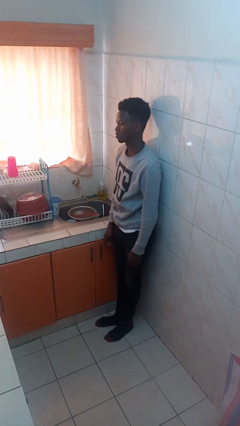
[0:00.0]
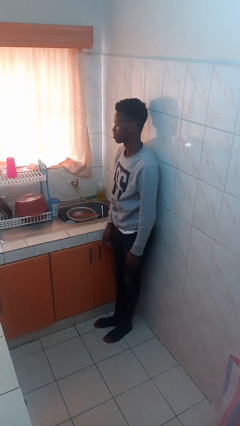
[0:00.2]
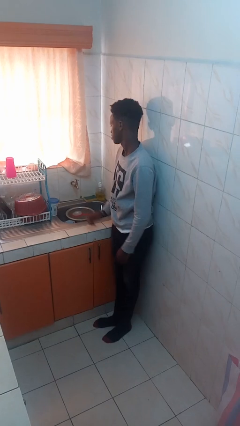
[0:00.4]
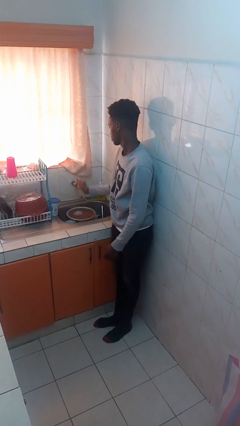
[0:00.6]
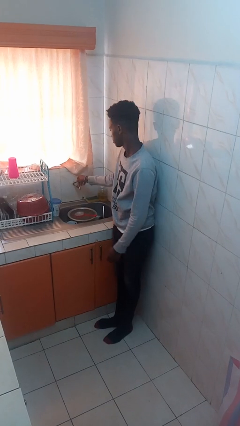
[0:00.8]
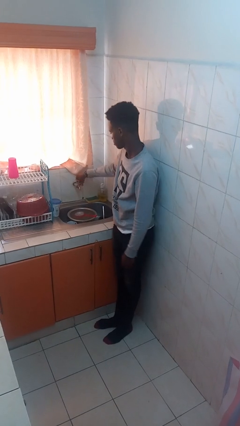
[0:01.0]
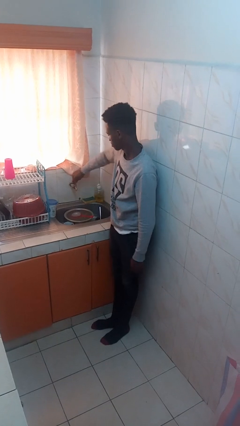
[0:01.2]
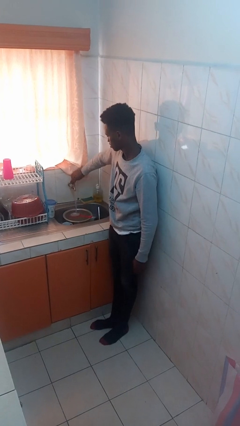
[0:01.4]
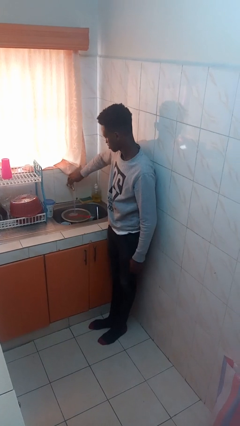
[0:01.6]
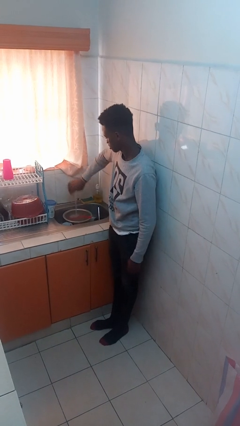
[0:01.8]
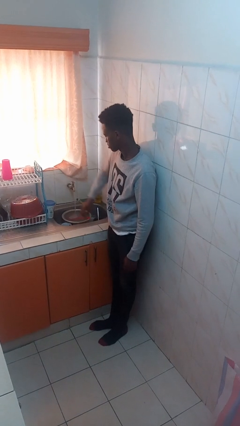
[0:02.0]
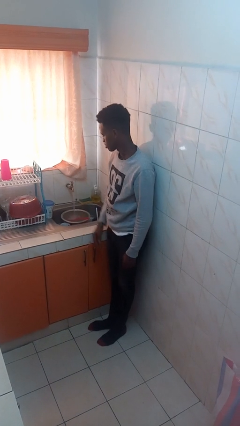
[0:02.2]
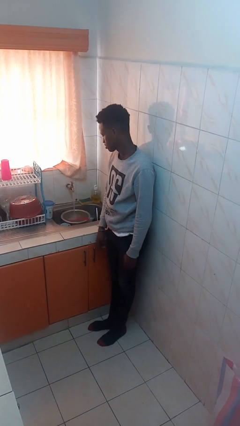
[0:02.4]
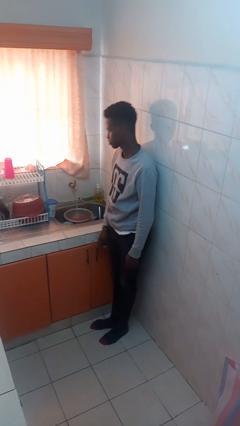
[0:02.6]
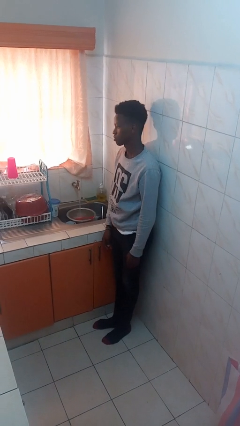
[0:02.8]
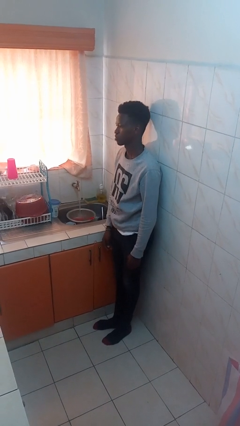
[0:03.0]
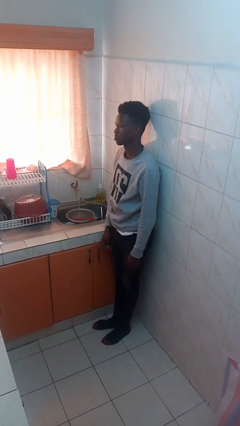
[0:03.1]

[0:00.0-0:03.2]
person turns on faucet

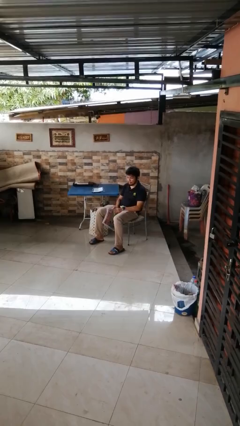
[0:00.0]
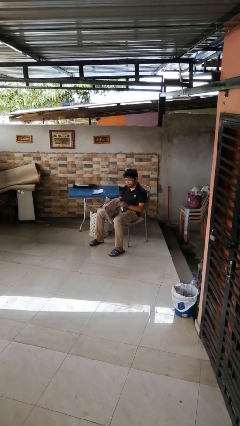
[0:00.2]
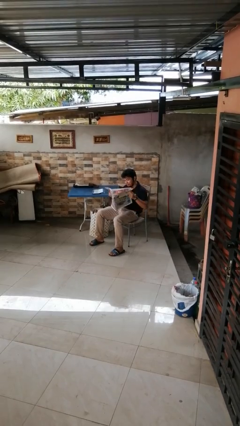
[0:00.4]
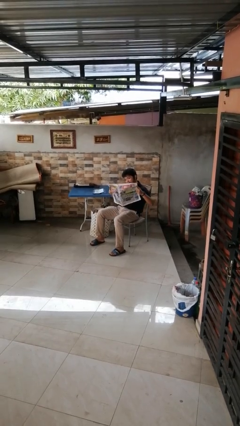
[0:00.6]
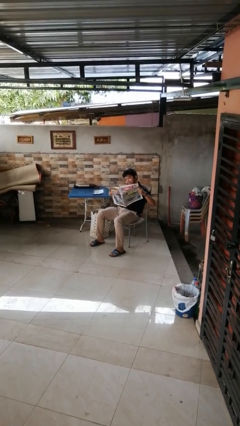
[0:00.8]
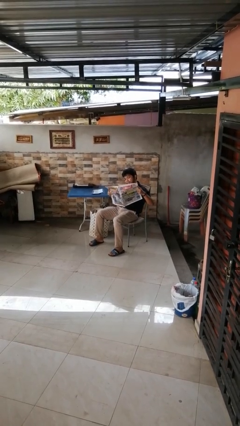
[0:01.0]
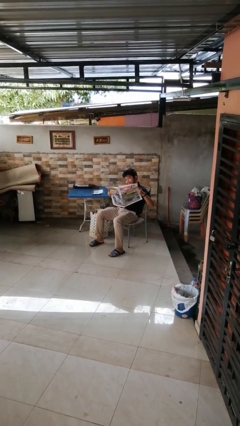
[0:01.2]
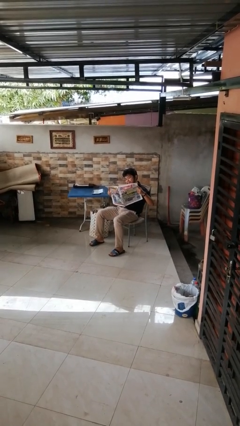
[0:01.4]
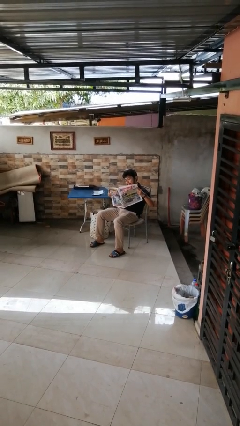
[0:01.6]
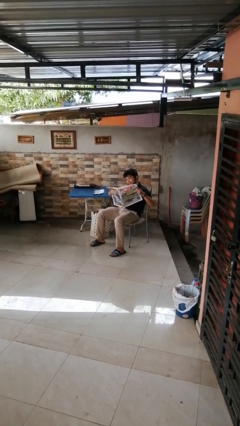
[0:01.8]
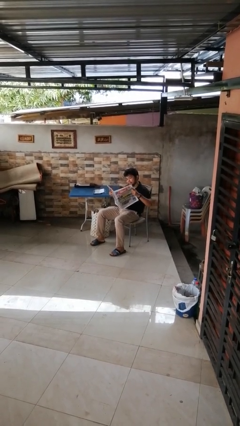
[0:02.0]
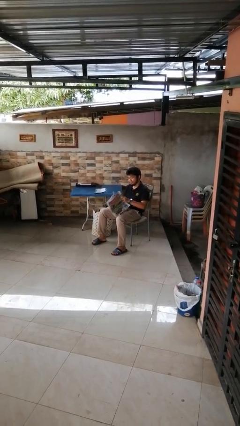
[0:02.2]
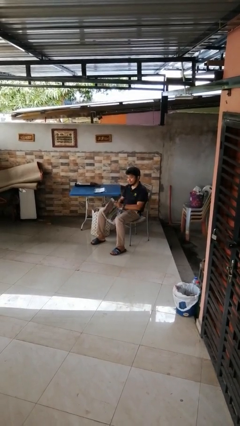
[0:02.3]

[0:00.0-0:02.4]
person reads newspaper

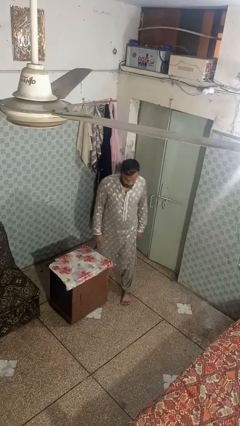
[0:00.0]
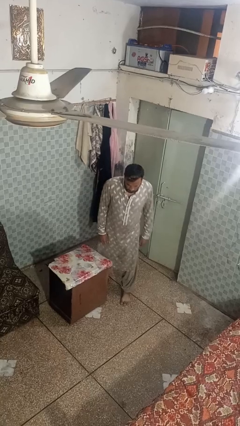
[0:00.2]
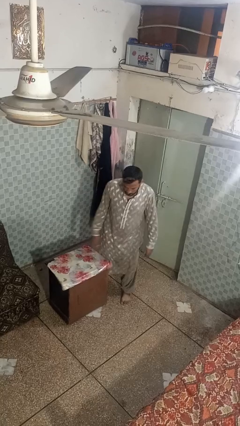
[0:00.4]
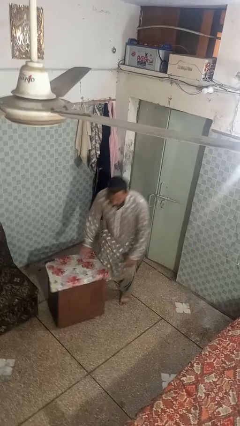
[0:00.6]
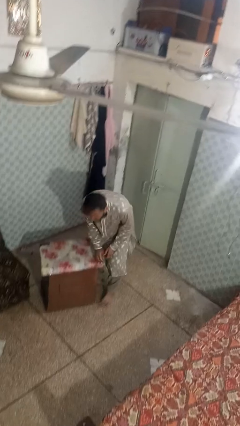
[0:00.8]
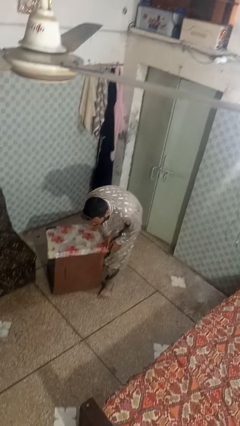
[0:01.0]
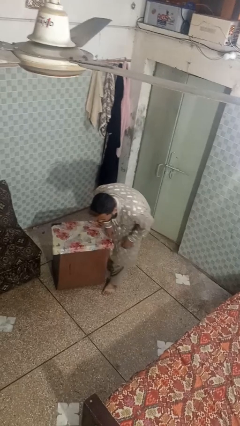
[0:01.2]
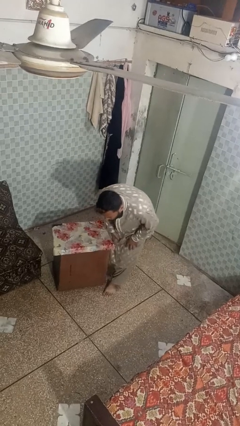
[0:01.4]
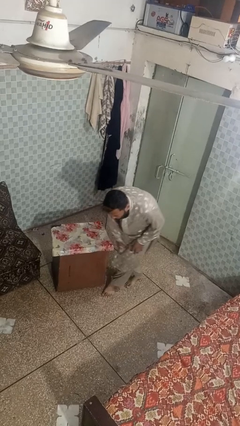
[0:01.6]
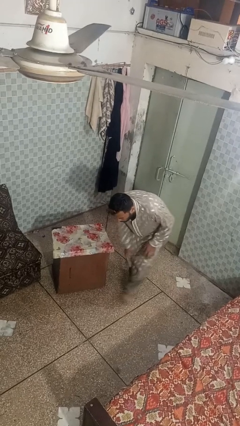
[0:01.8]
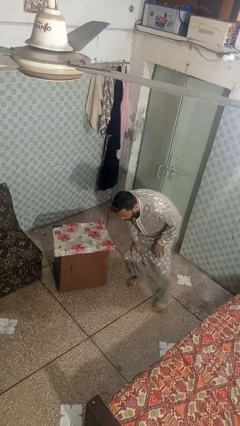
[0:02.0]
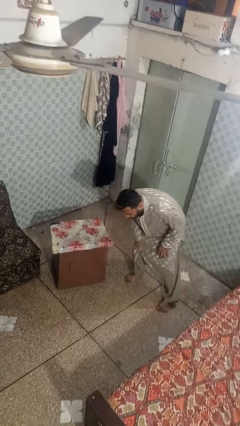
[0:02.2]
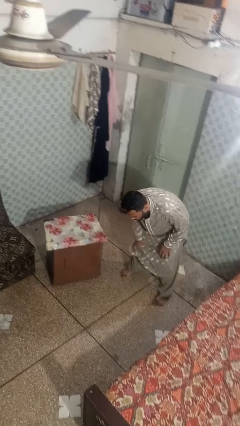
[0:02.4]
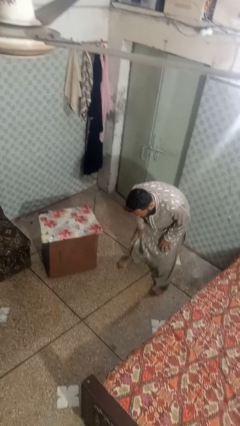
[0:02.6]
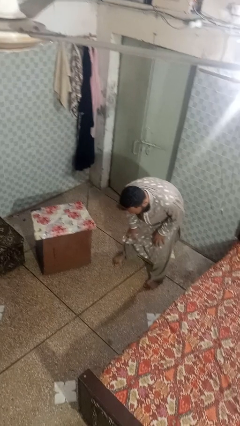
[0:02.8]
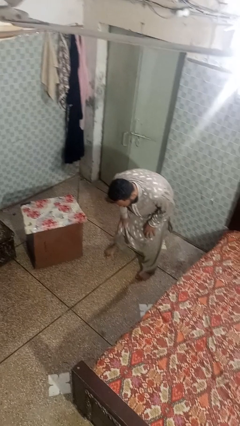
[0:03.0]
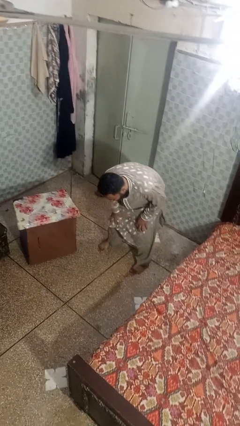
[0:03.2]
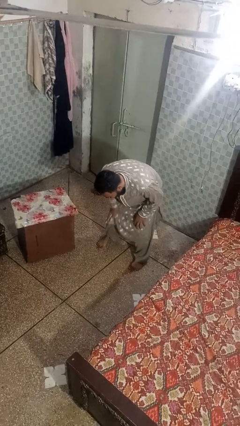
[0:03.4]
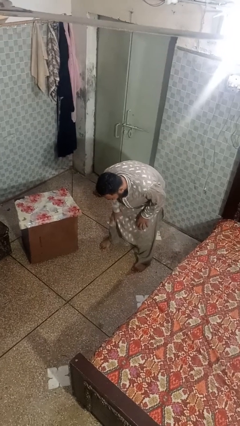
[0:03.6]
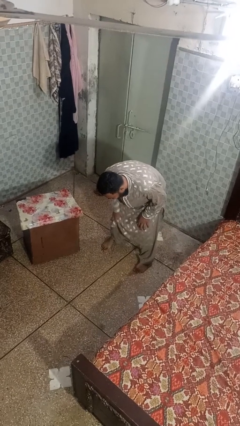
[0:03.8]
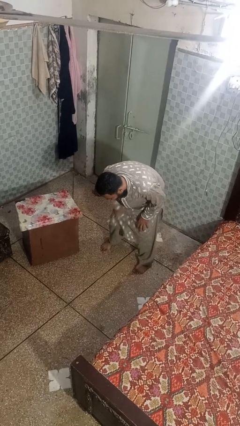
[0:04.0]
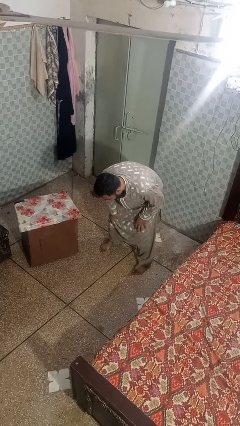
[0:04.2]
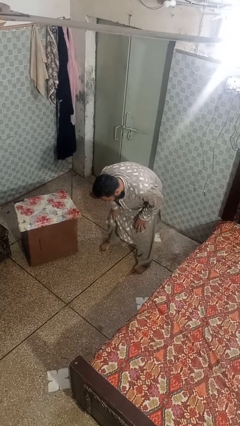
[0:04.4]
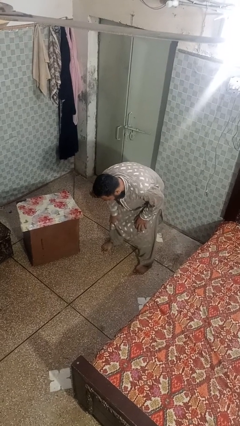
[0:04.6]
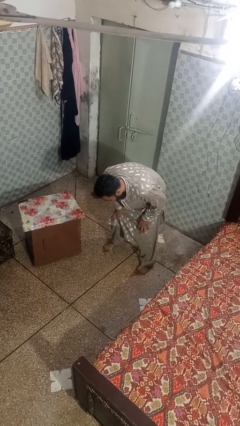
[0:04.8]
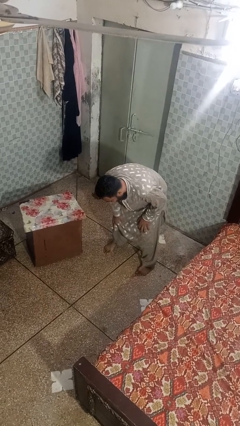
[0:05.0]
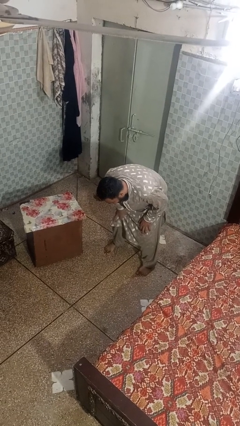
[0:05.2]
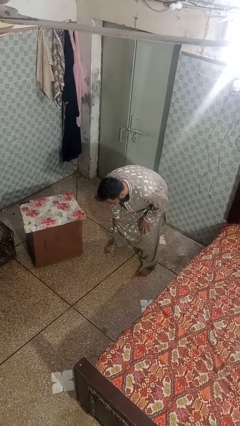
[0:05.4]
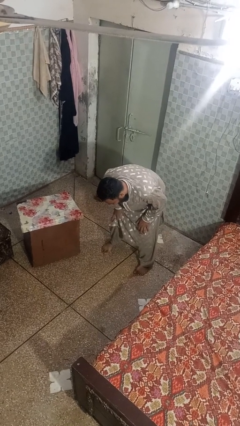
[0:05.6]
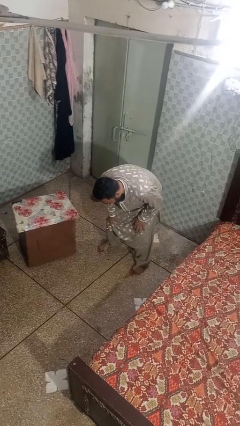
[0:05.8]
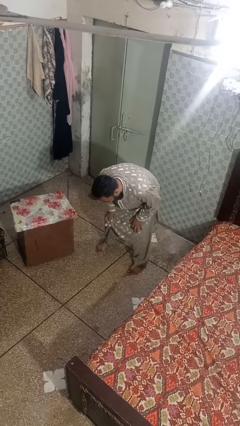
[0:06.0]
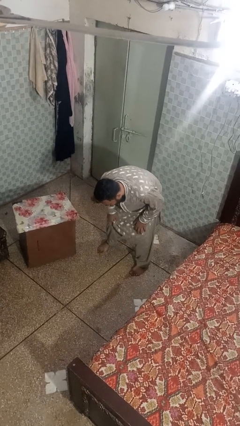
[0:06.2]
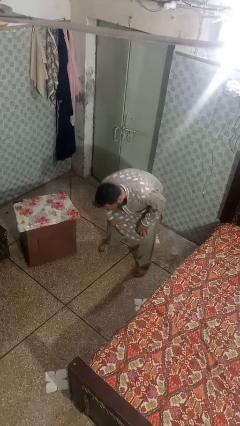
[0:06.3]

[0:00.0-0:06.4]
person trips on object on floor

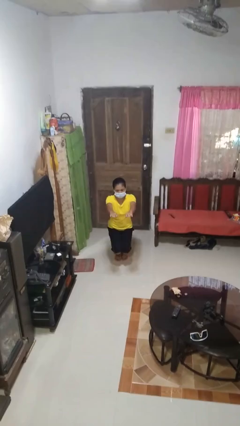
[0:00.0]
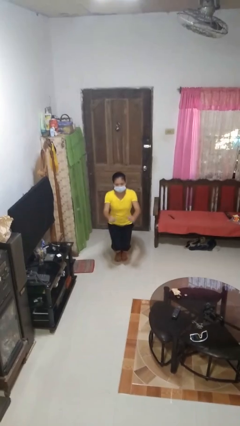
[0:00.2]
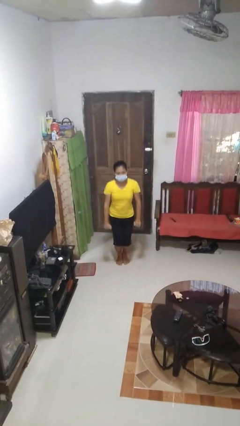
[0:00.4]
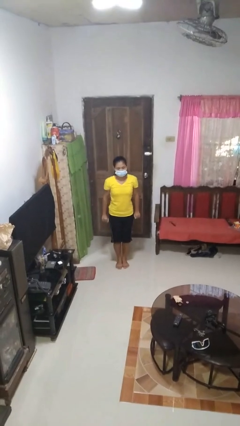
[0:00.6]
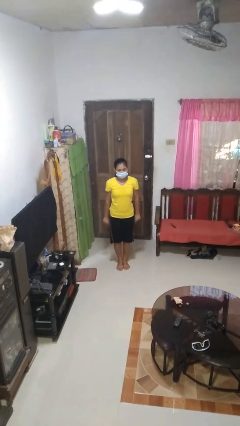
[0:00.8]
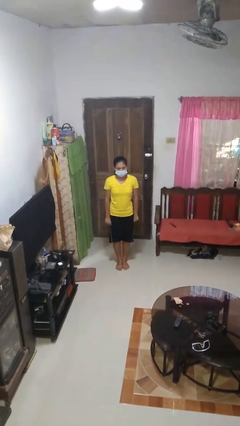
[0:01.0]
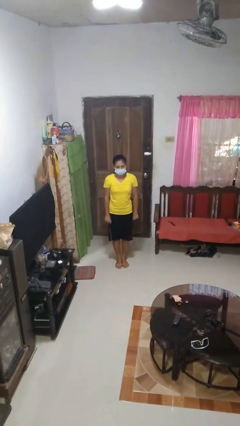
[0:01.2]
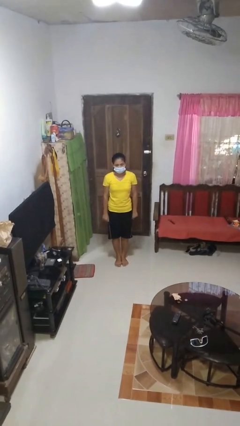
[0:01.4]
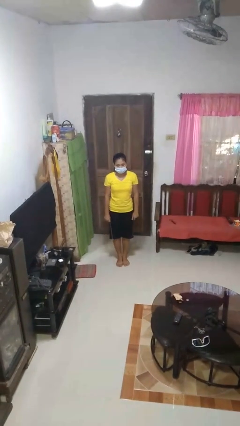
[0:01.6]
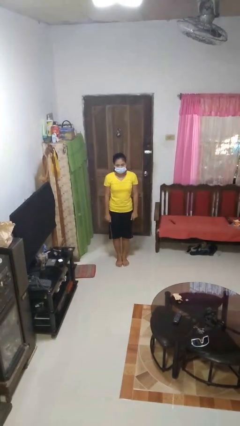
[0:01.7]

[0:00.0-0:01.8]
person stands up

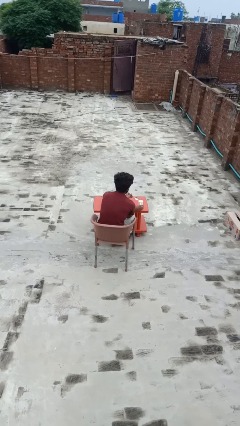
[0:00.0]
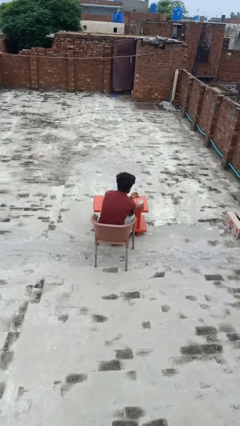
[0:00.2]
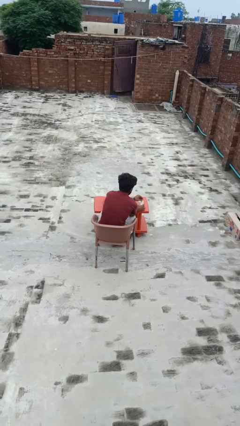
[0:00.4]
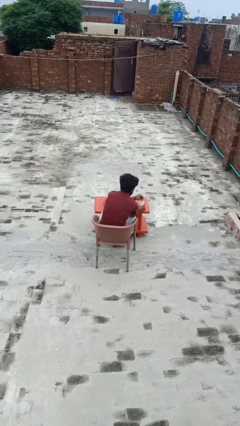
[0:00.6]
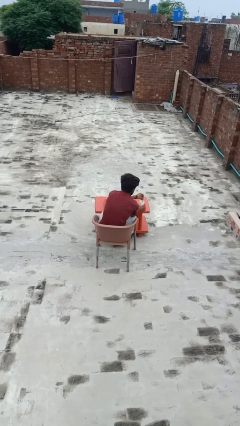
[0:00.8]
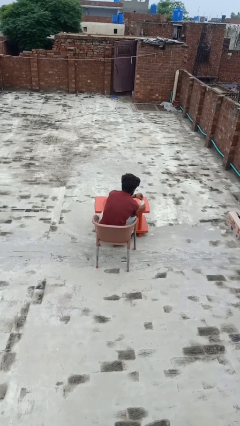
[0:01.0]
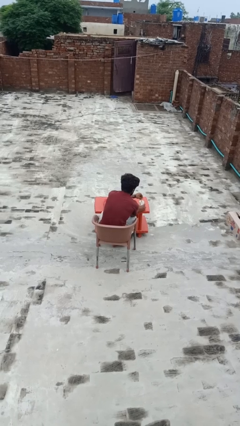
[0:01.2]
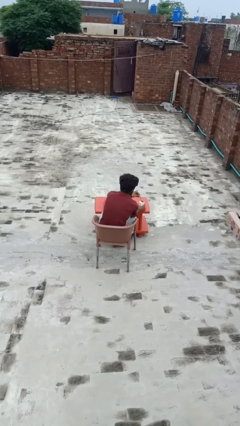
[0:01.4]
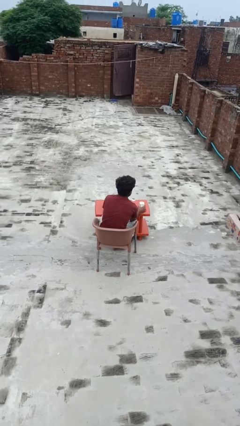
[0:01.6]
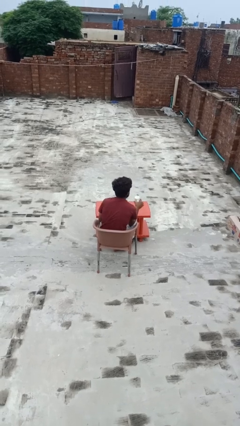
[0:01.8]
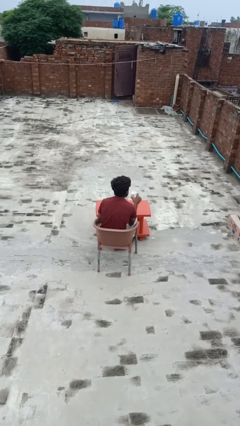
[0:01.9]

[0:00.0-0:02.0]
person stirs mug

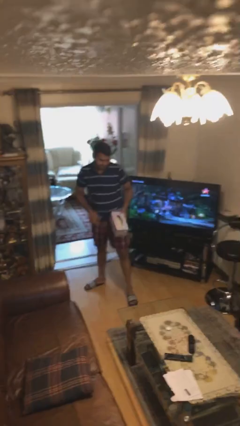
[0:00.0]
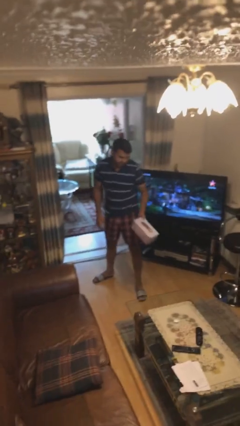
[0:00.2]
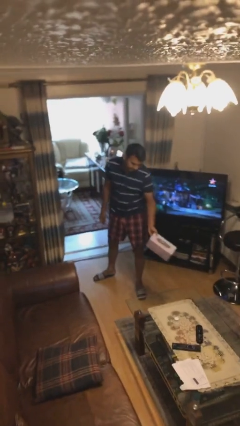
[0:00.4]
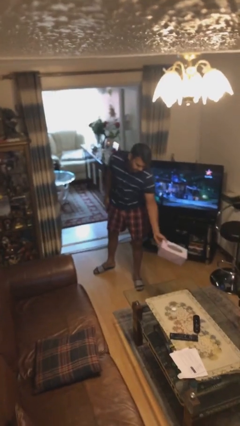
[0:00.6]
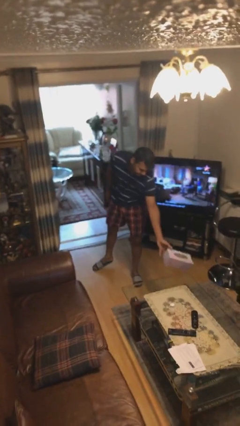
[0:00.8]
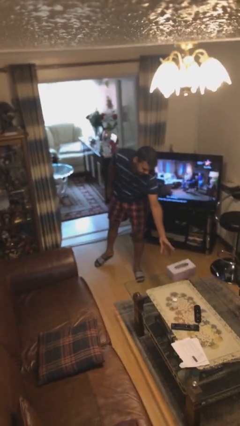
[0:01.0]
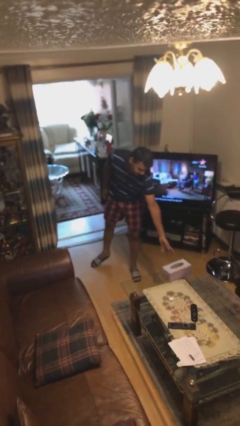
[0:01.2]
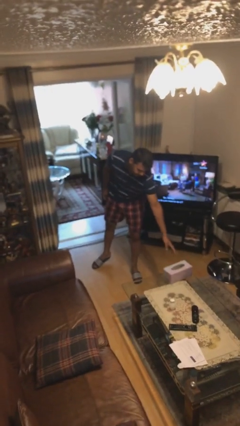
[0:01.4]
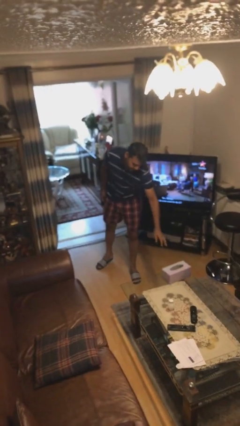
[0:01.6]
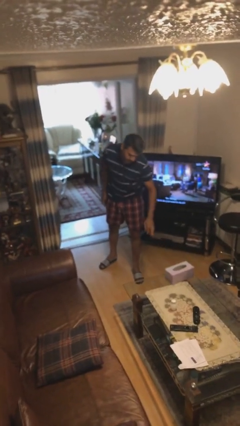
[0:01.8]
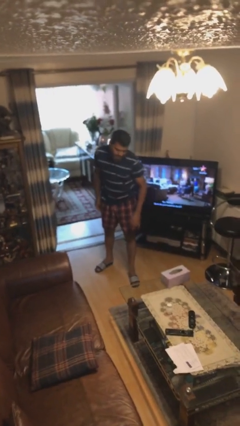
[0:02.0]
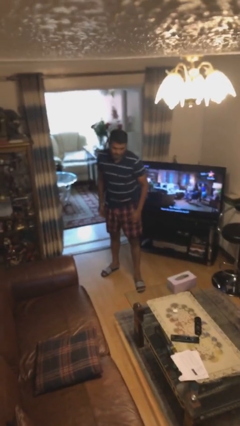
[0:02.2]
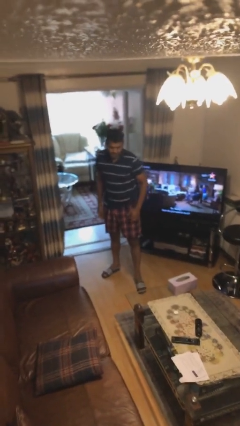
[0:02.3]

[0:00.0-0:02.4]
person puts down object on table
